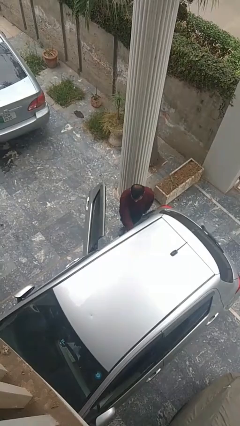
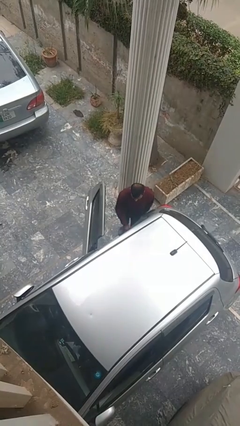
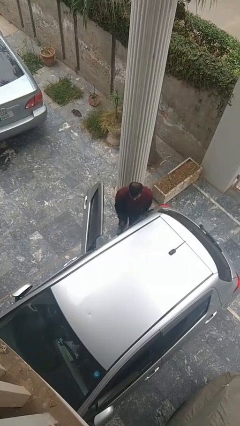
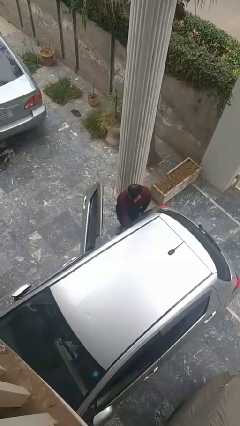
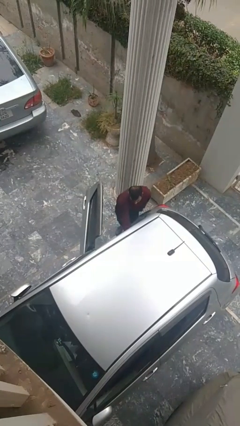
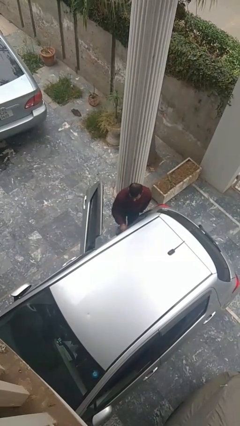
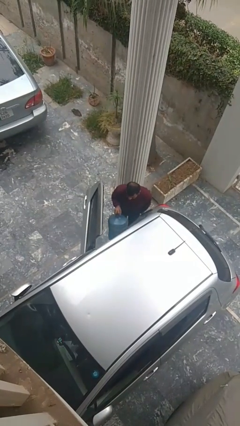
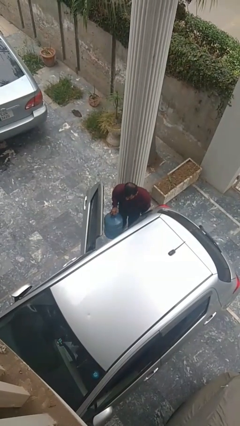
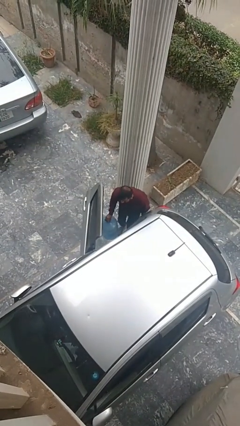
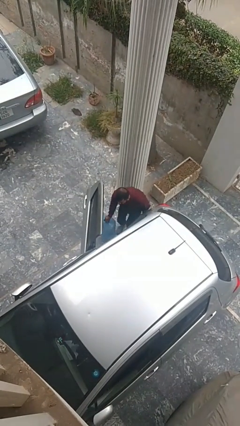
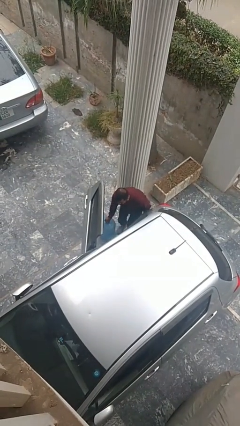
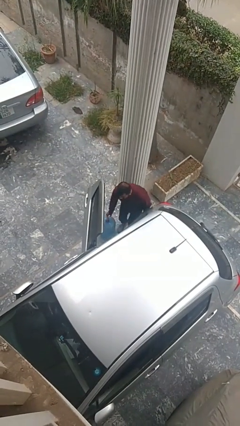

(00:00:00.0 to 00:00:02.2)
person unloads car

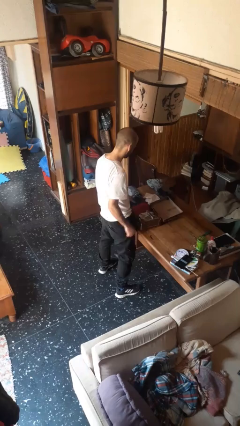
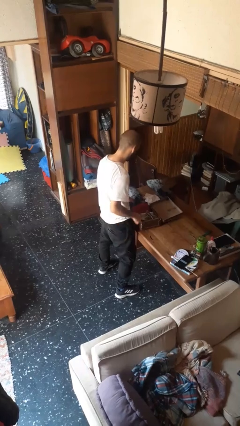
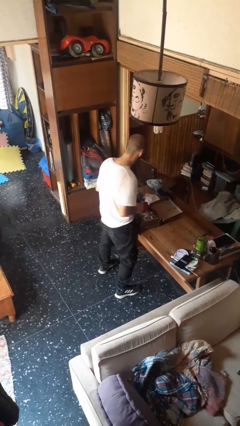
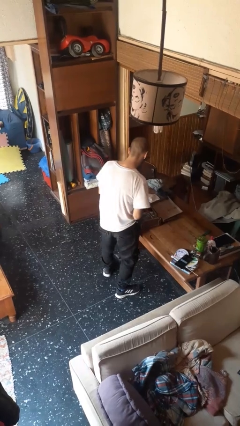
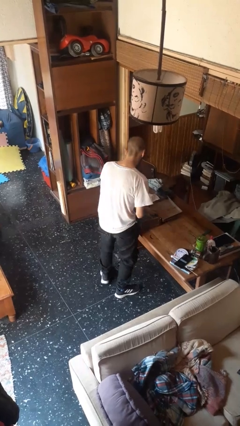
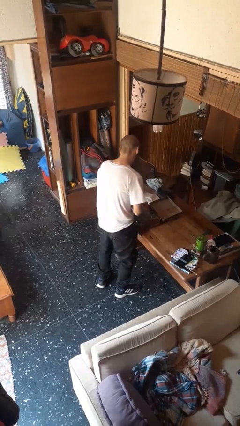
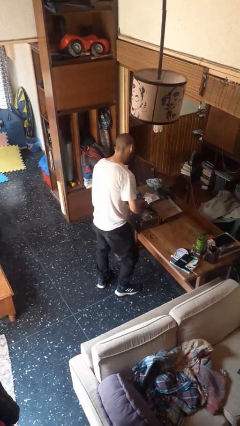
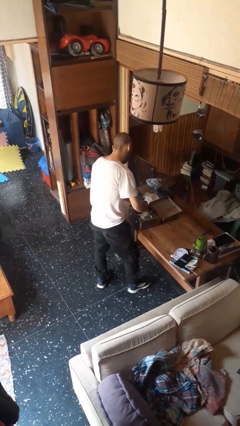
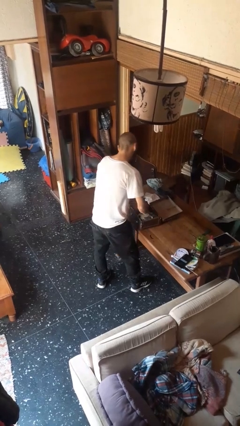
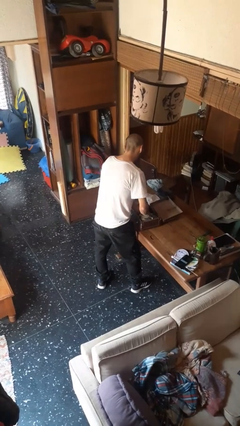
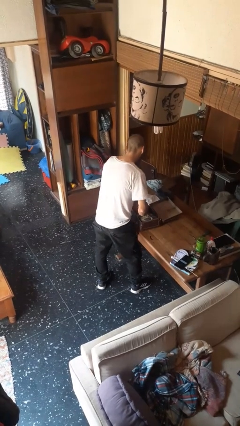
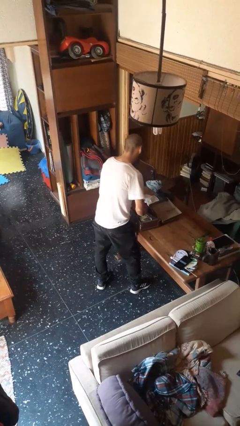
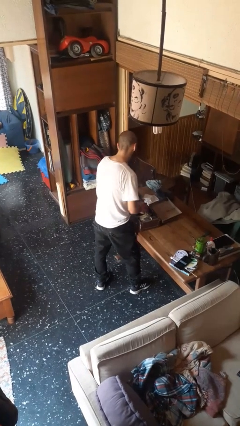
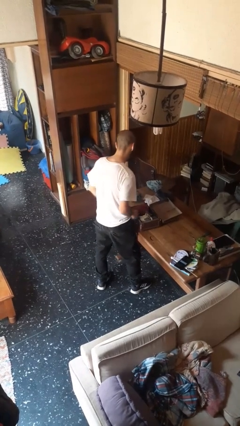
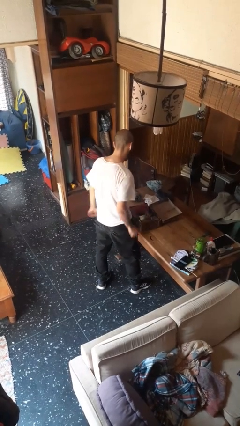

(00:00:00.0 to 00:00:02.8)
person loads clothes into suitcase

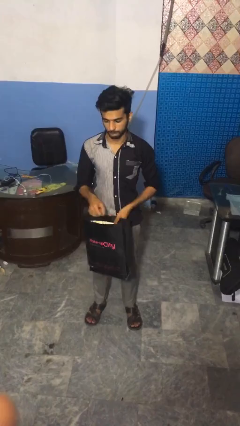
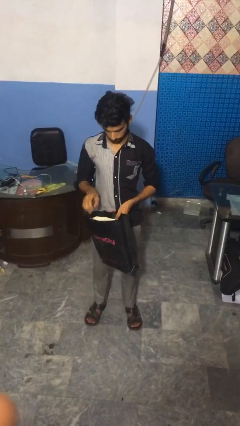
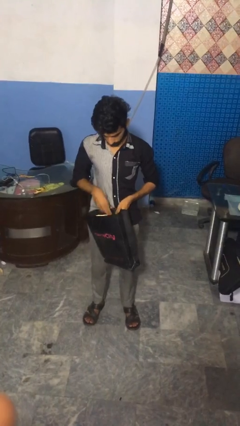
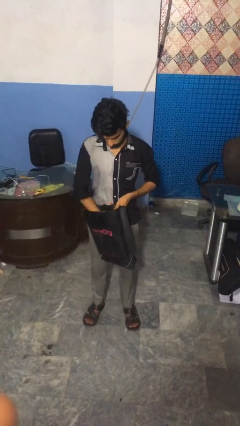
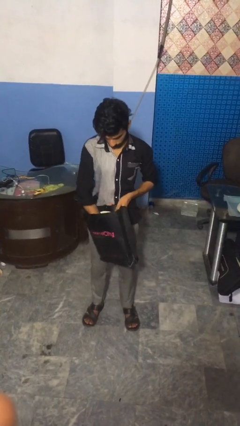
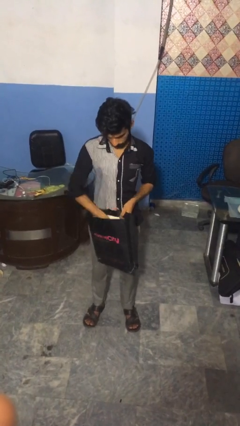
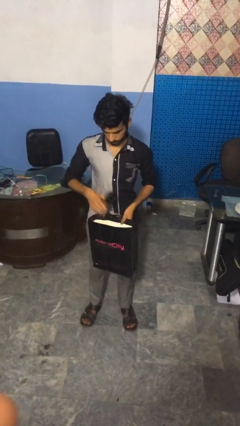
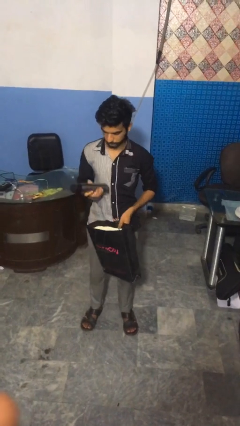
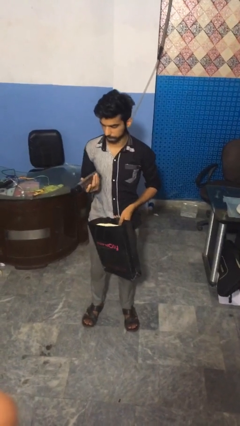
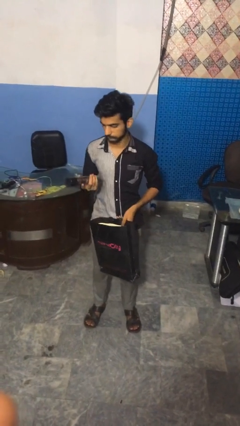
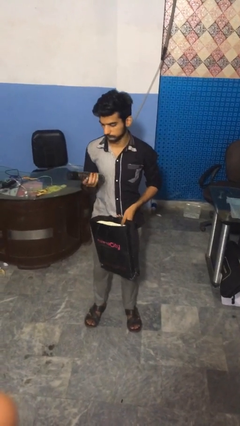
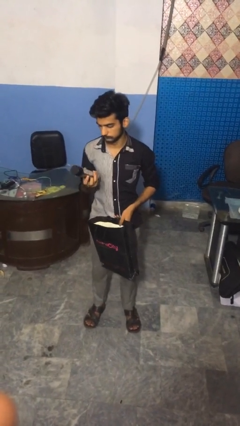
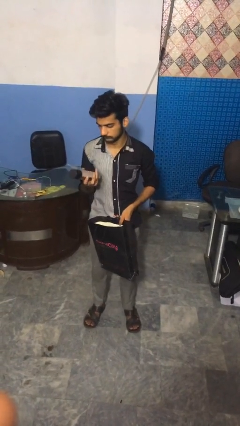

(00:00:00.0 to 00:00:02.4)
person takes object from bag

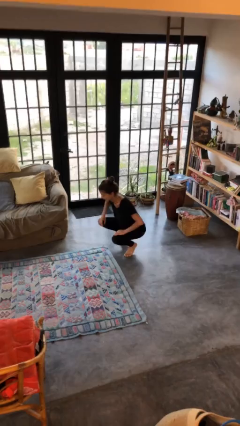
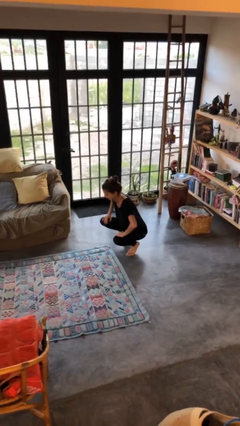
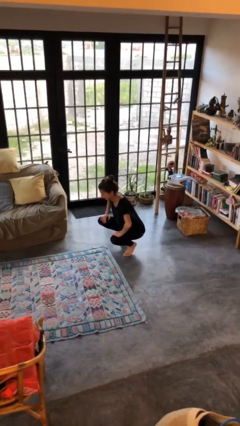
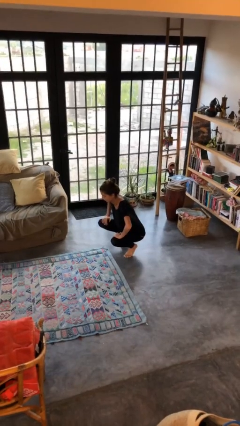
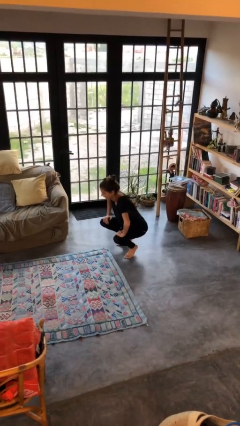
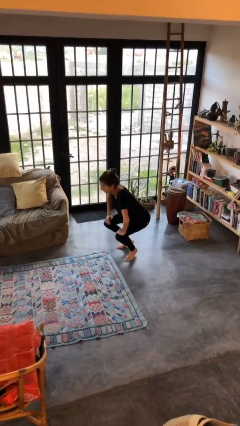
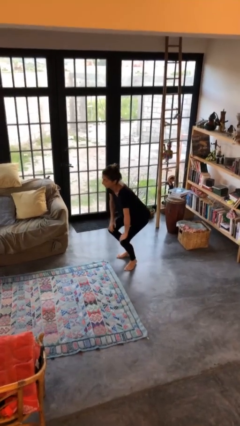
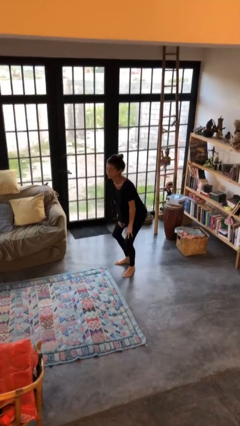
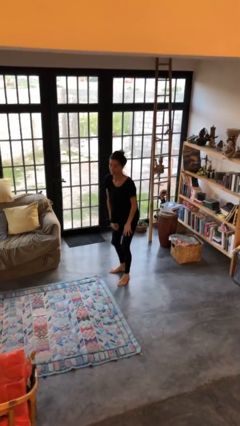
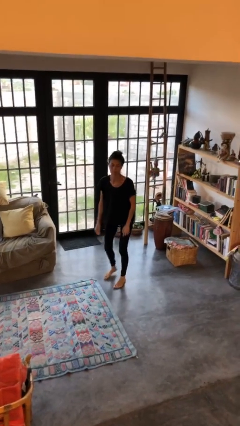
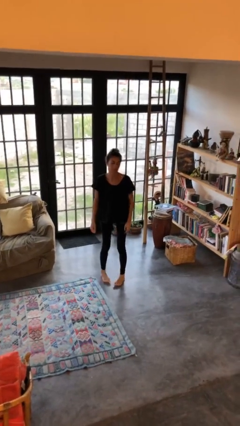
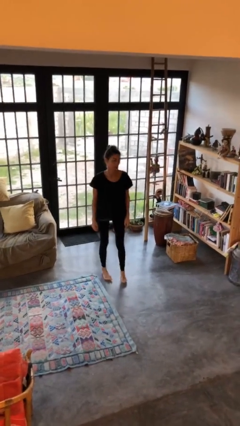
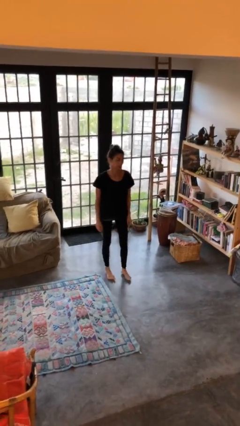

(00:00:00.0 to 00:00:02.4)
person stands up

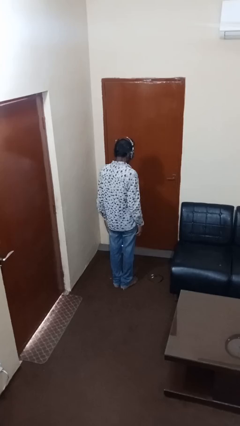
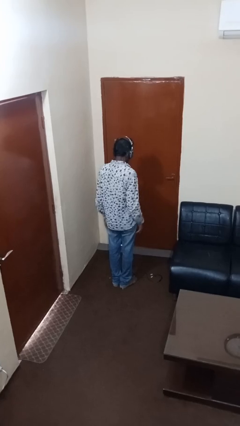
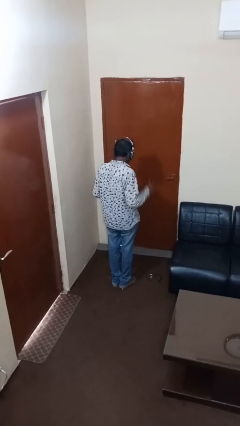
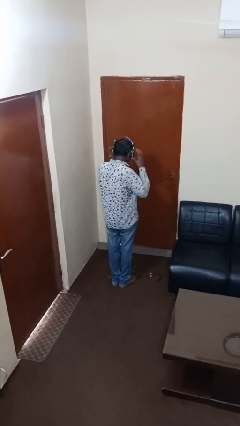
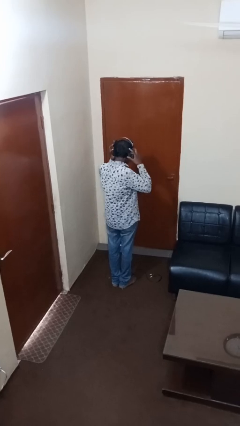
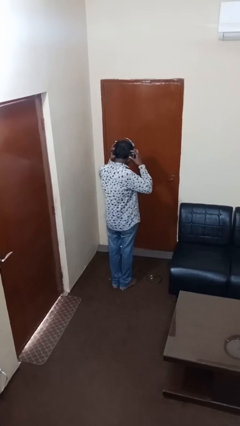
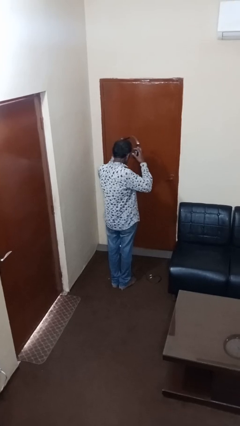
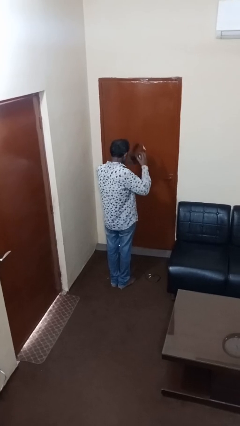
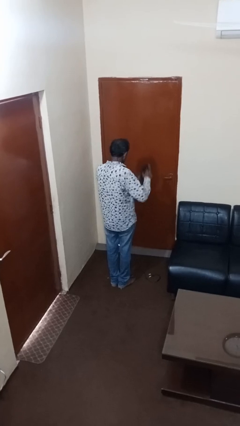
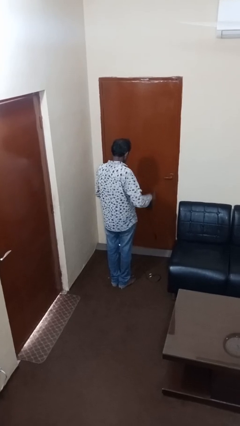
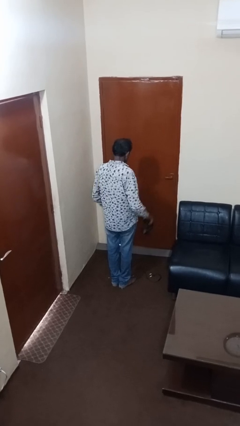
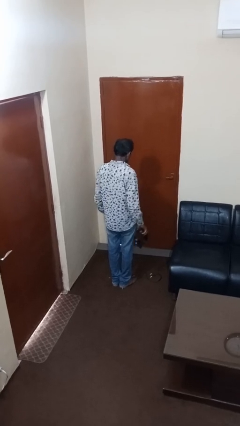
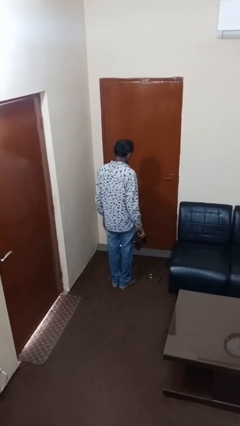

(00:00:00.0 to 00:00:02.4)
person takes off headphones

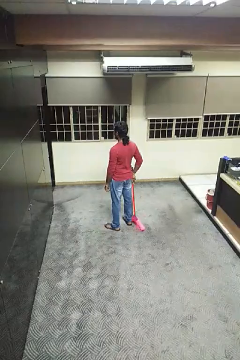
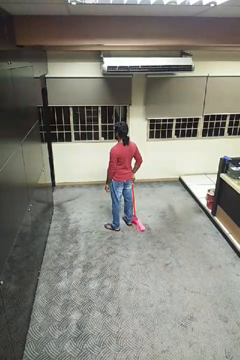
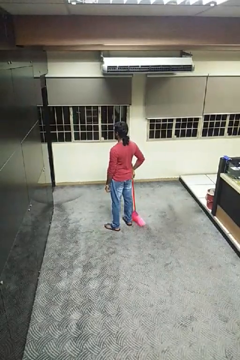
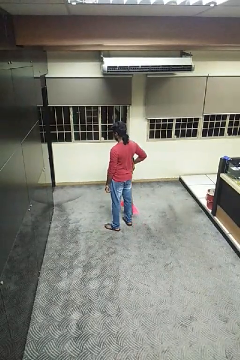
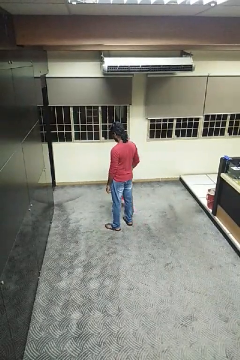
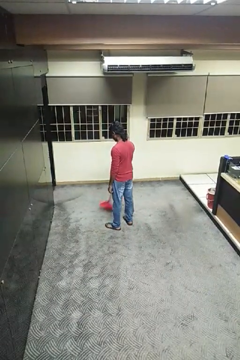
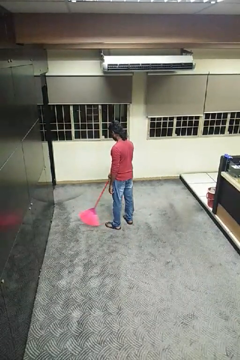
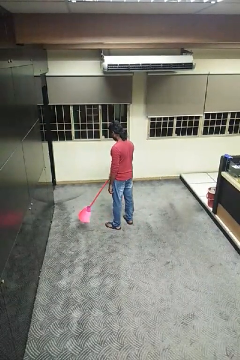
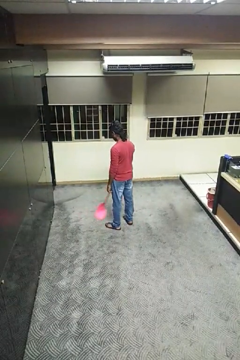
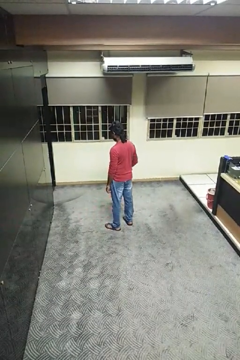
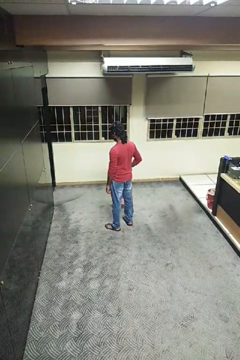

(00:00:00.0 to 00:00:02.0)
person sweeps floor

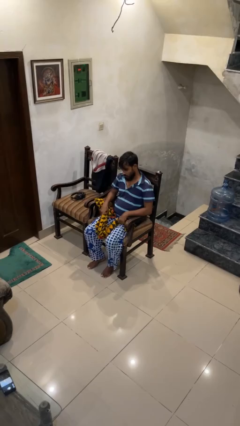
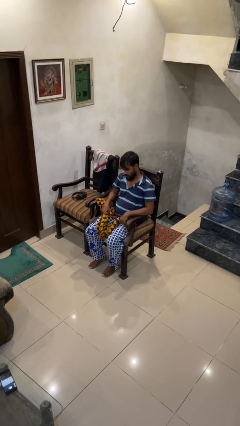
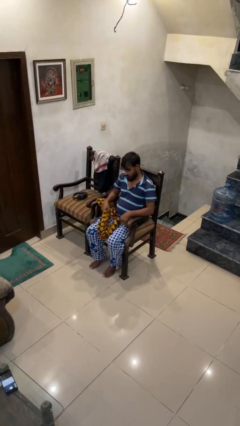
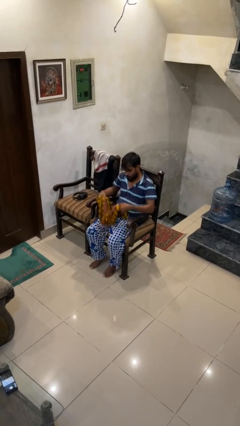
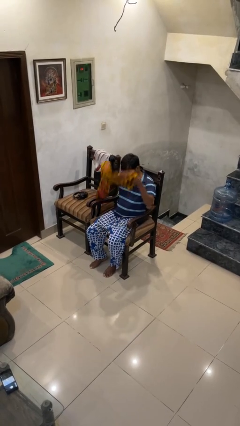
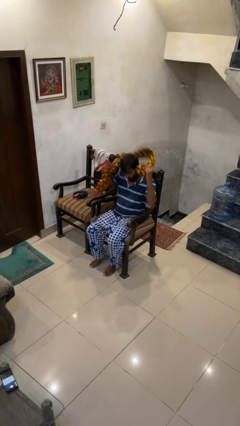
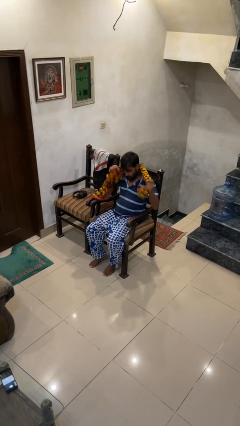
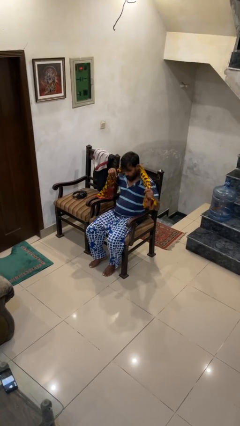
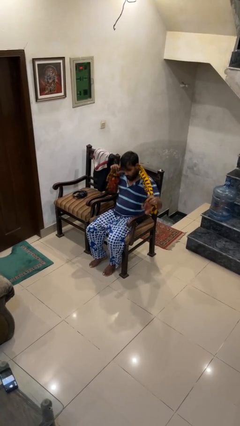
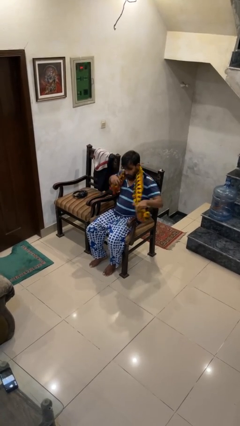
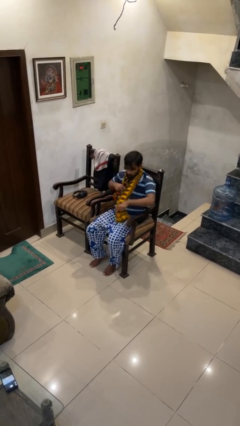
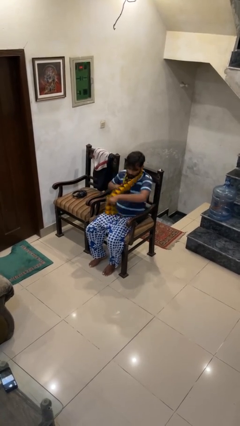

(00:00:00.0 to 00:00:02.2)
person puts on scarf

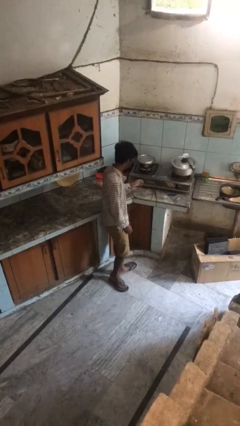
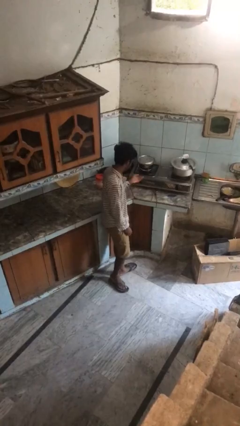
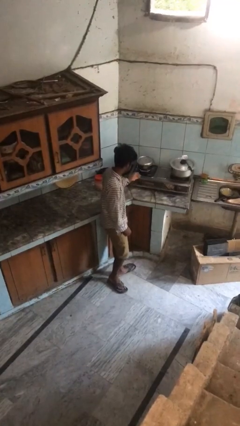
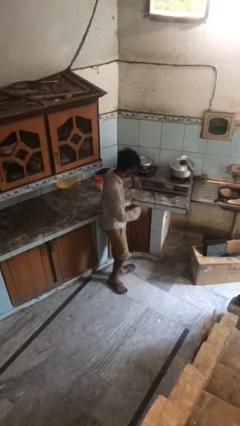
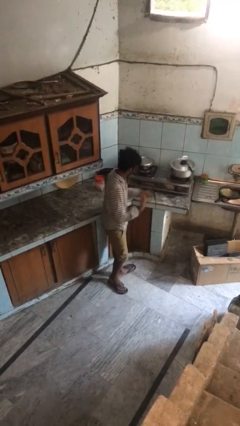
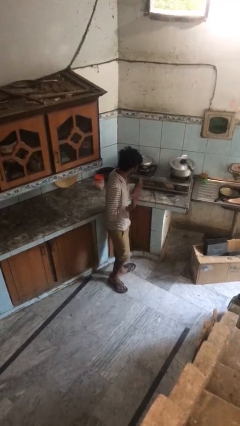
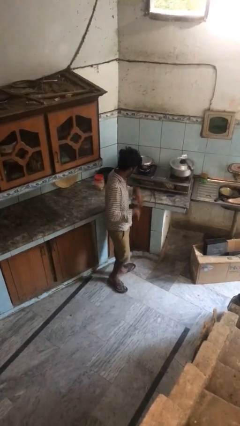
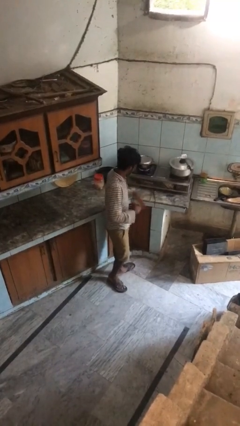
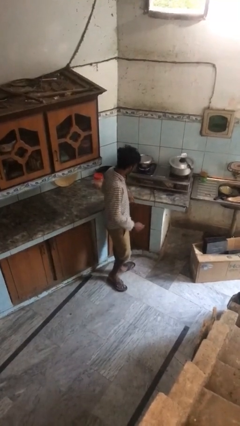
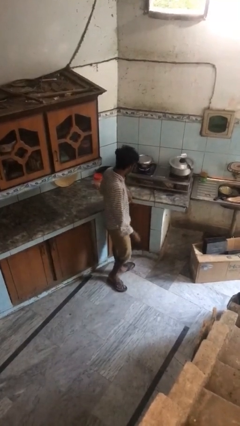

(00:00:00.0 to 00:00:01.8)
person burns hand
